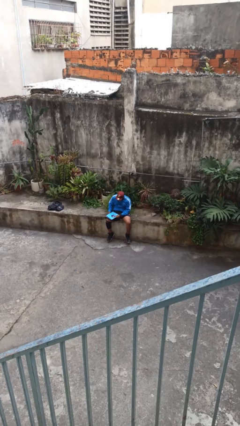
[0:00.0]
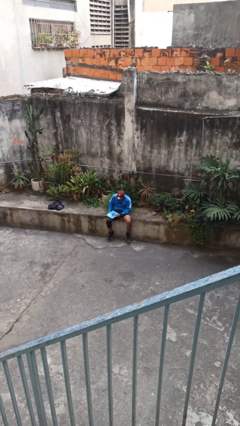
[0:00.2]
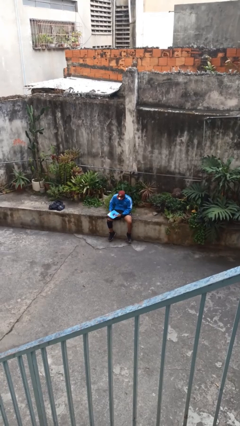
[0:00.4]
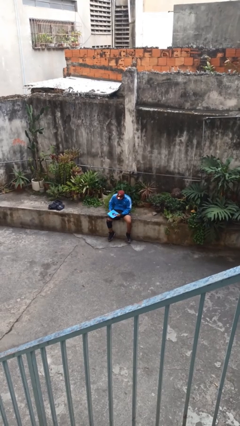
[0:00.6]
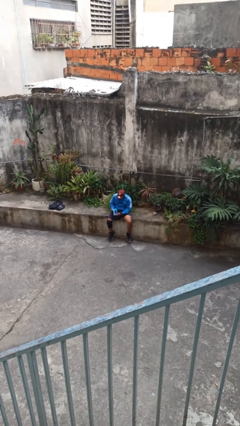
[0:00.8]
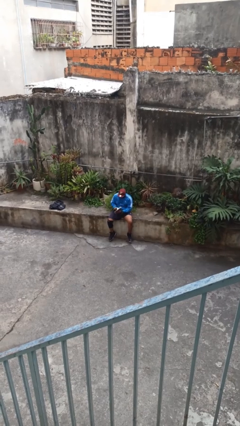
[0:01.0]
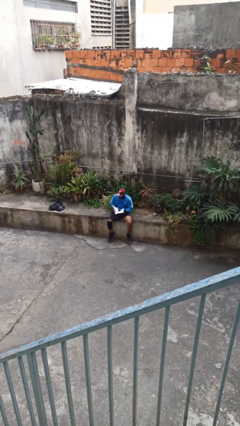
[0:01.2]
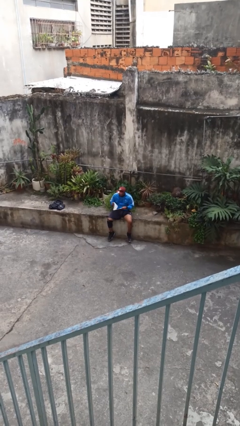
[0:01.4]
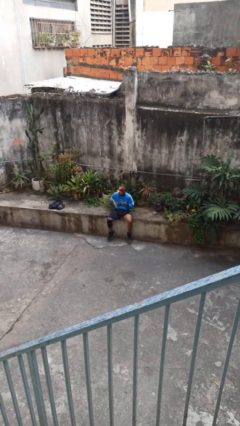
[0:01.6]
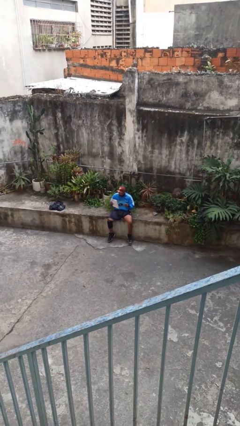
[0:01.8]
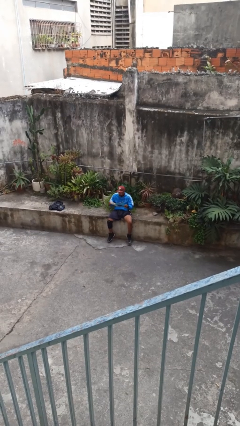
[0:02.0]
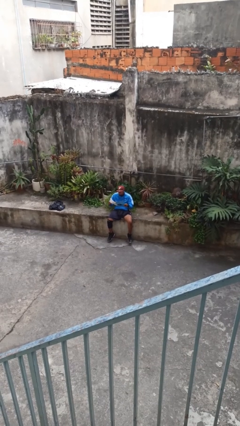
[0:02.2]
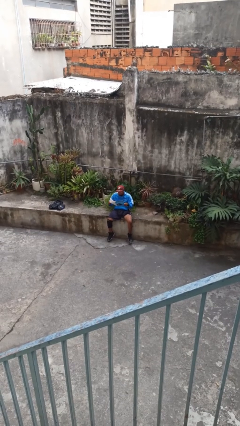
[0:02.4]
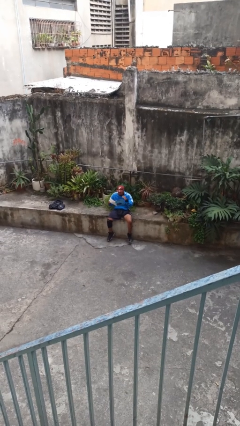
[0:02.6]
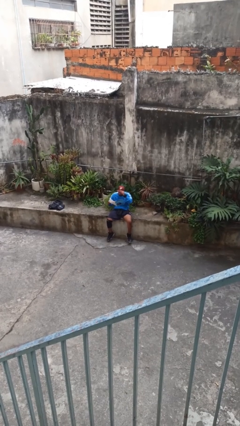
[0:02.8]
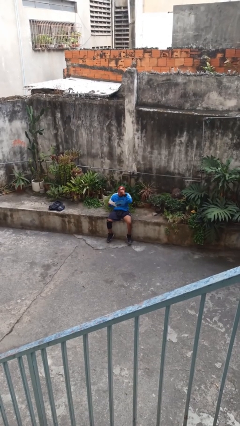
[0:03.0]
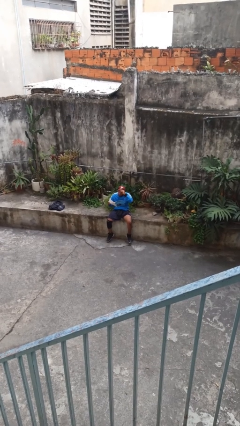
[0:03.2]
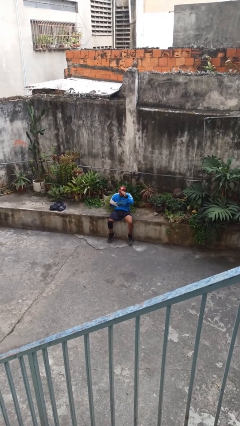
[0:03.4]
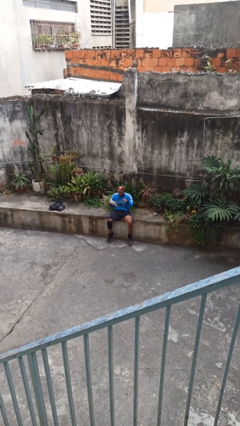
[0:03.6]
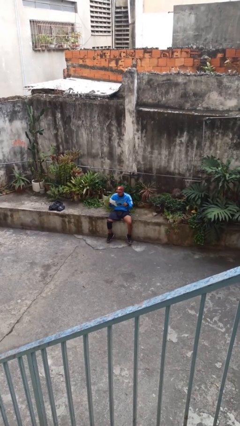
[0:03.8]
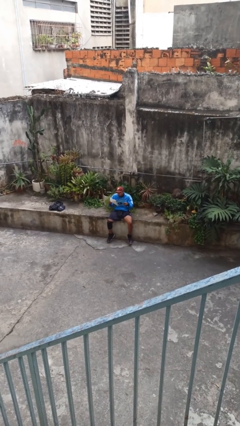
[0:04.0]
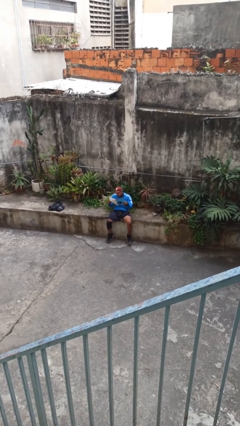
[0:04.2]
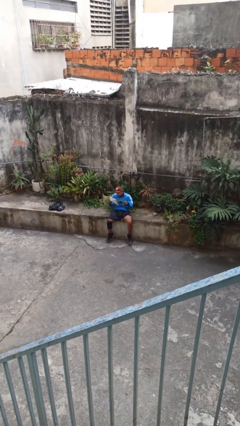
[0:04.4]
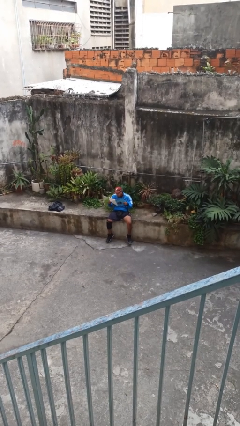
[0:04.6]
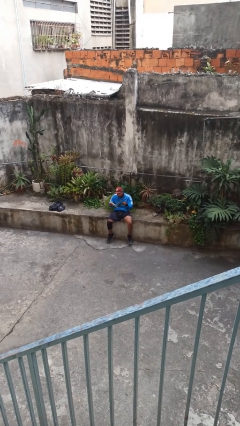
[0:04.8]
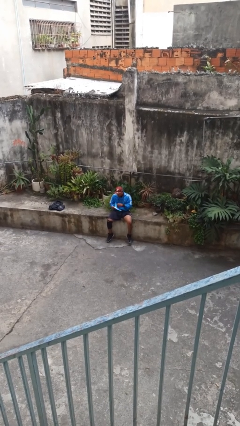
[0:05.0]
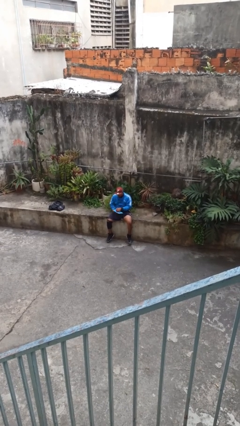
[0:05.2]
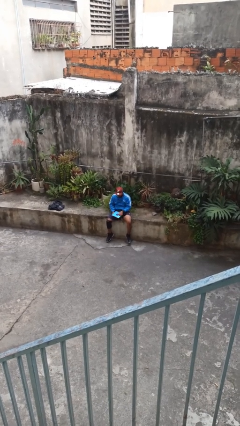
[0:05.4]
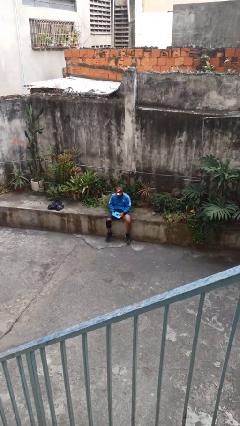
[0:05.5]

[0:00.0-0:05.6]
person reads document

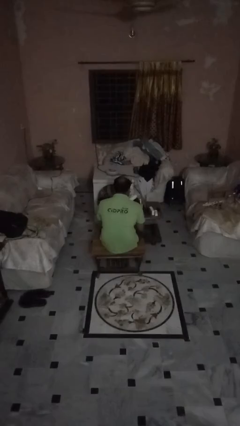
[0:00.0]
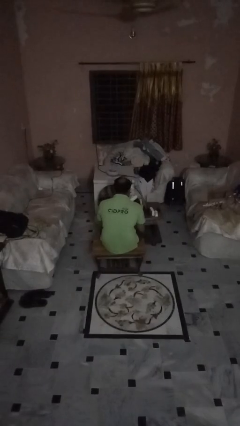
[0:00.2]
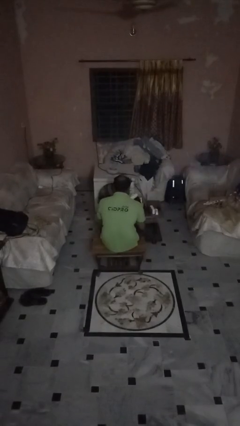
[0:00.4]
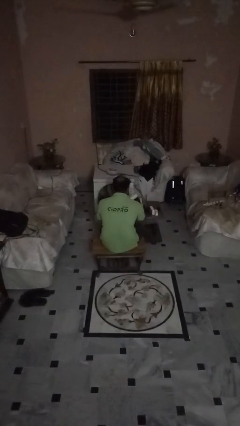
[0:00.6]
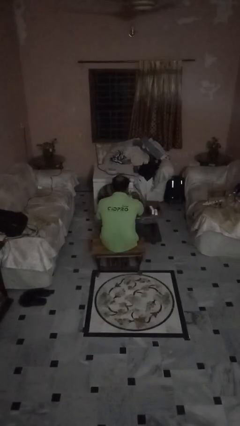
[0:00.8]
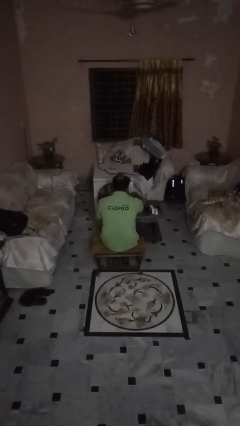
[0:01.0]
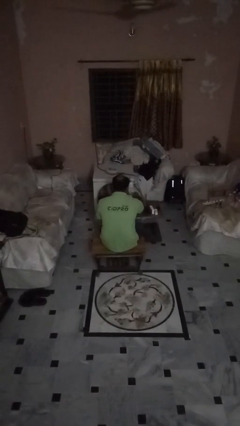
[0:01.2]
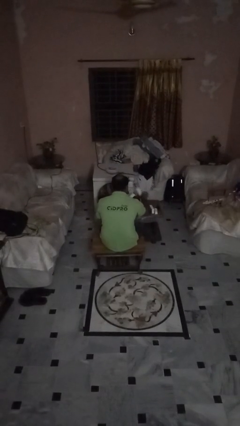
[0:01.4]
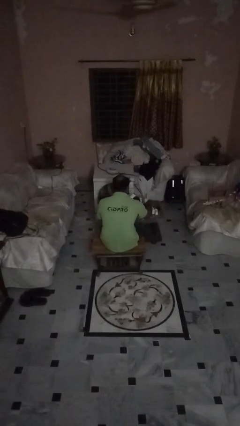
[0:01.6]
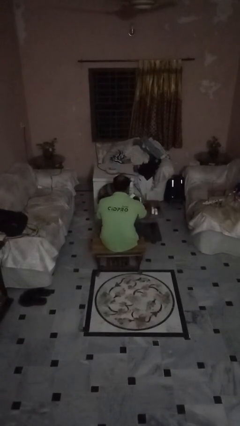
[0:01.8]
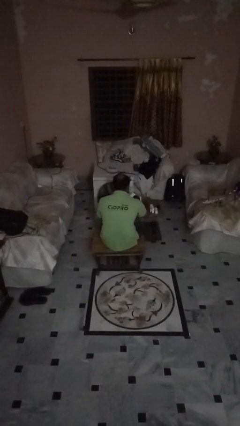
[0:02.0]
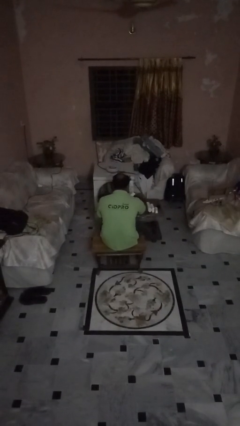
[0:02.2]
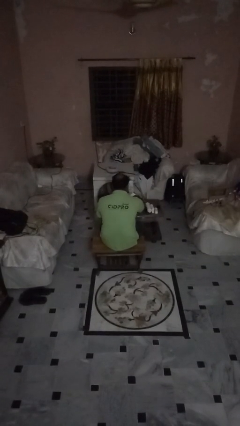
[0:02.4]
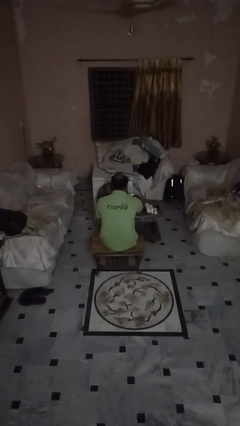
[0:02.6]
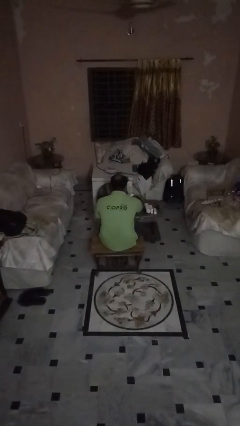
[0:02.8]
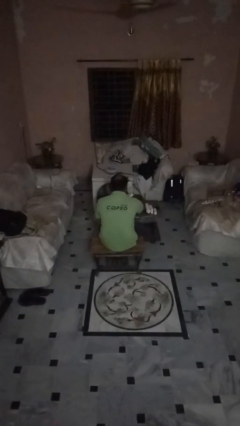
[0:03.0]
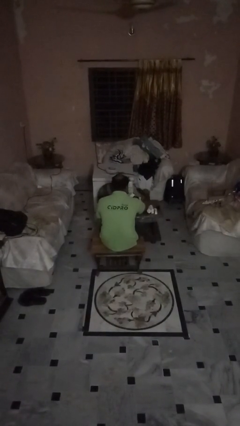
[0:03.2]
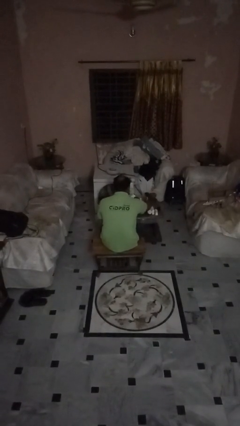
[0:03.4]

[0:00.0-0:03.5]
person unloads box onto table

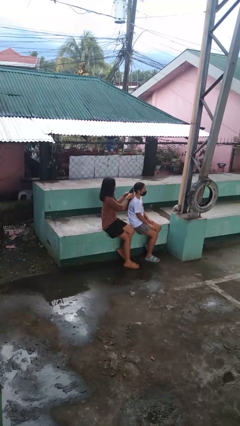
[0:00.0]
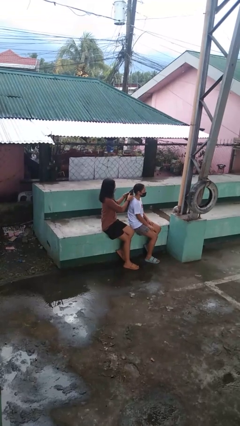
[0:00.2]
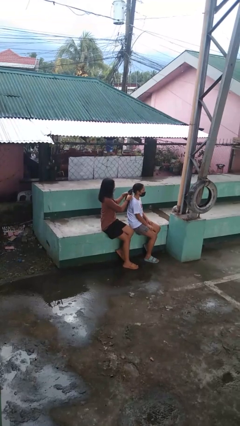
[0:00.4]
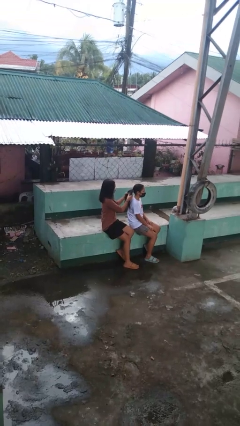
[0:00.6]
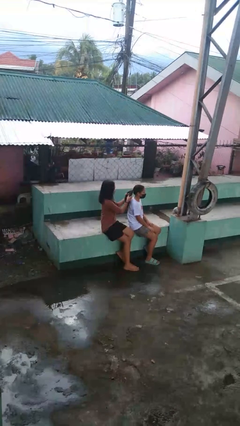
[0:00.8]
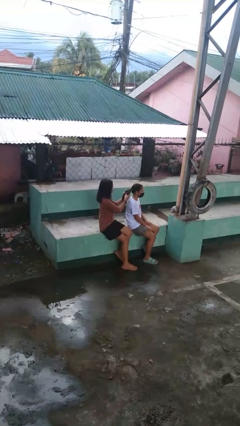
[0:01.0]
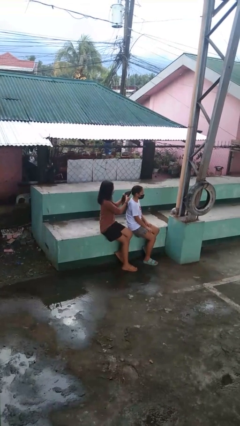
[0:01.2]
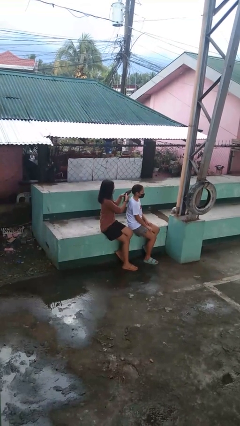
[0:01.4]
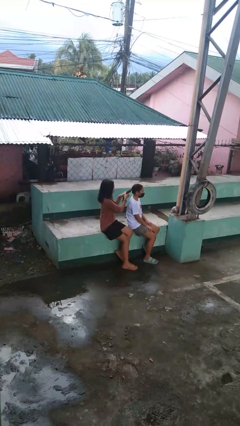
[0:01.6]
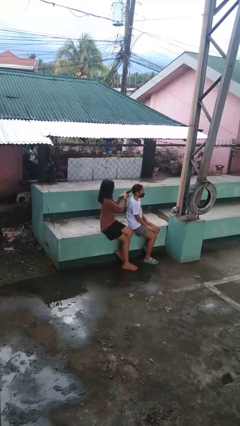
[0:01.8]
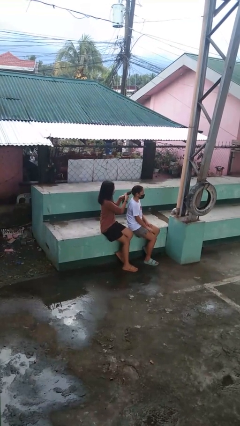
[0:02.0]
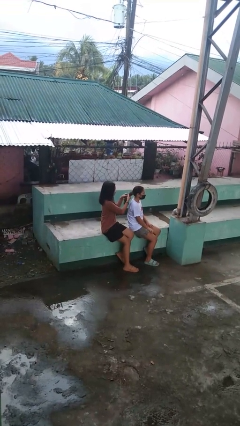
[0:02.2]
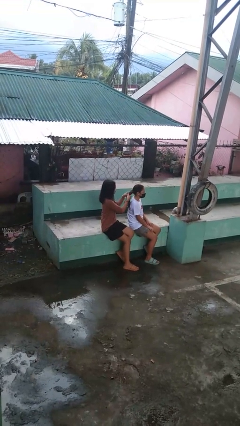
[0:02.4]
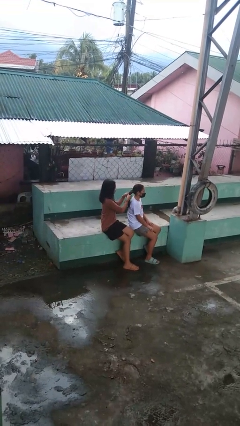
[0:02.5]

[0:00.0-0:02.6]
person braids hair of person

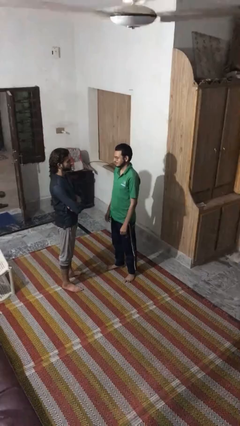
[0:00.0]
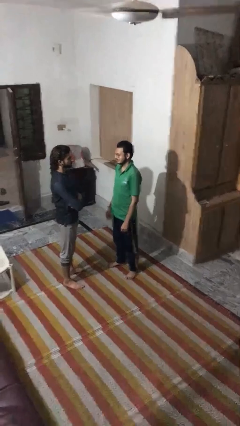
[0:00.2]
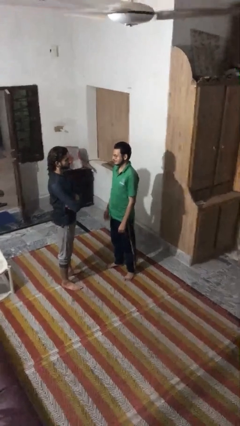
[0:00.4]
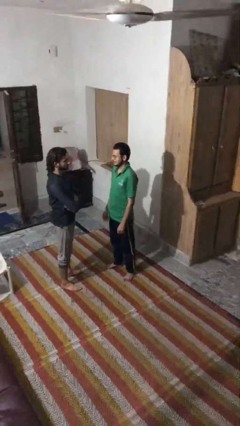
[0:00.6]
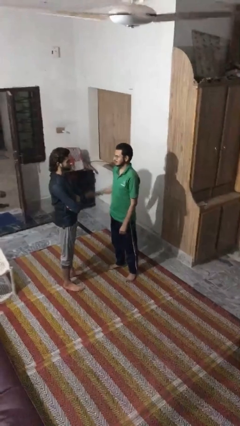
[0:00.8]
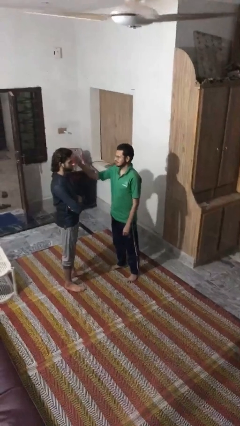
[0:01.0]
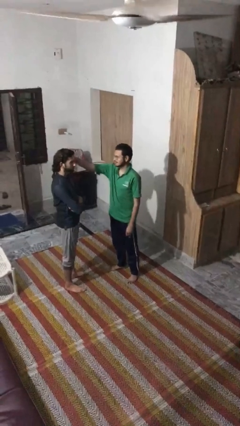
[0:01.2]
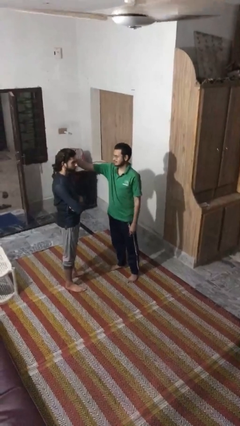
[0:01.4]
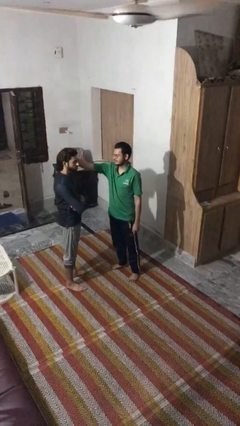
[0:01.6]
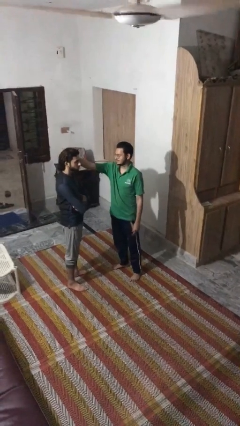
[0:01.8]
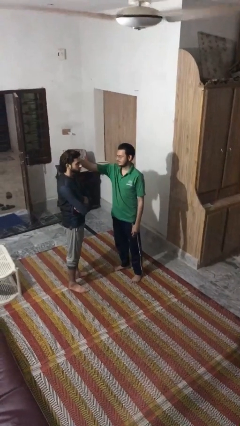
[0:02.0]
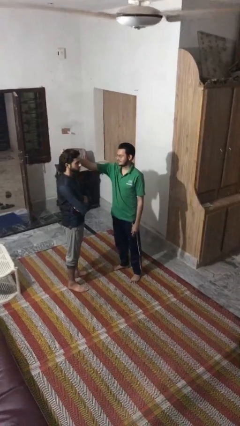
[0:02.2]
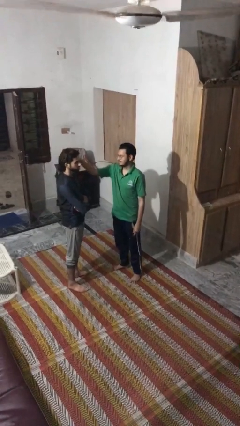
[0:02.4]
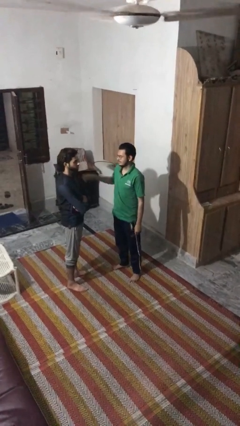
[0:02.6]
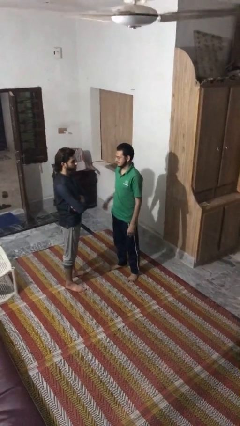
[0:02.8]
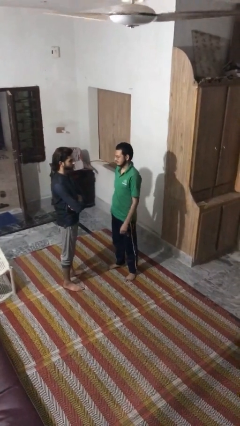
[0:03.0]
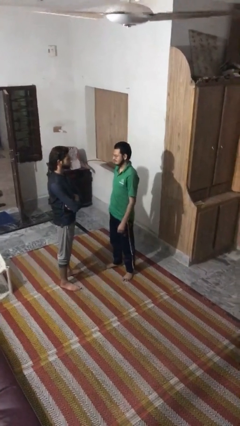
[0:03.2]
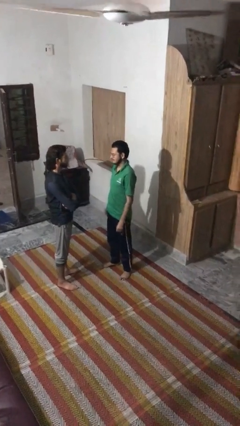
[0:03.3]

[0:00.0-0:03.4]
person grabs person by hair

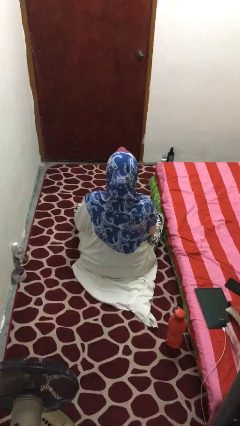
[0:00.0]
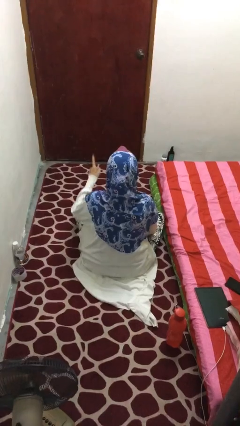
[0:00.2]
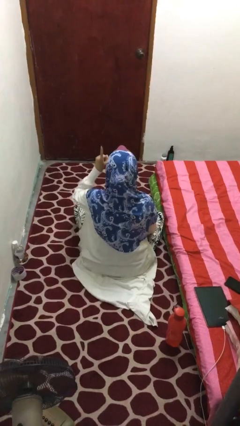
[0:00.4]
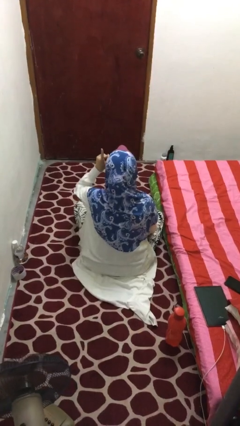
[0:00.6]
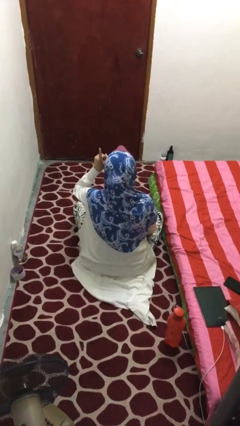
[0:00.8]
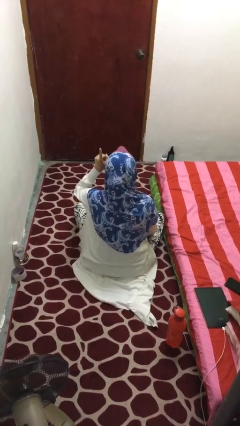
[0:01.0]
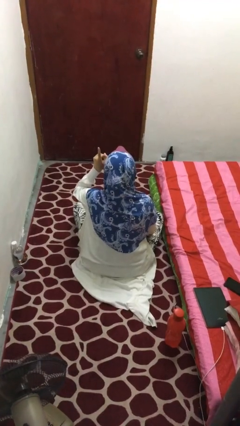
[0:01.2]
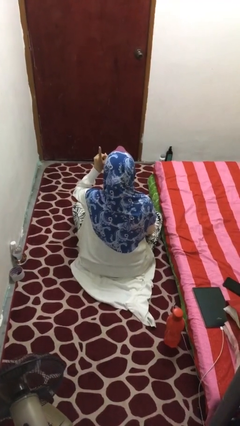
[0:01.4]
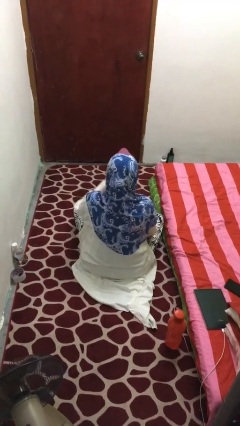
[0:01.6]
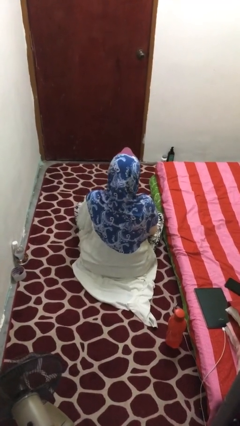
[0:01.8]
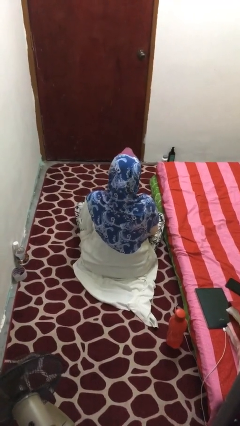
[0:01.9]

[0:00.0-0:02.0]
person gestures number one

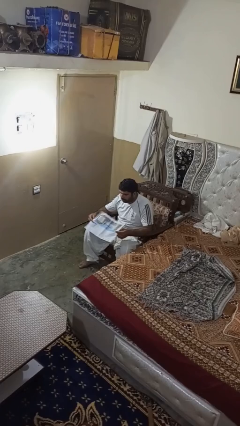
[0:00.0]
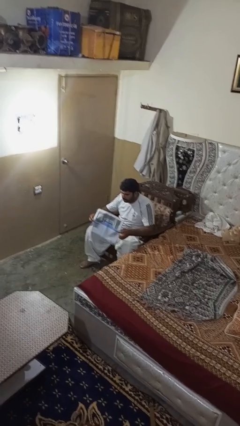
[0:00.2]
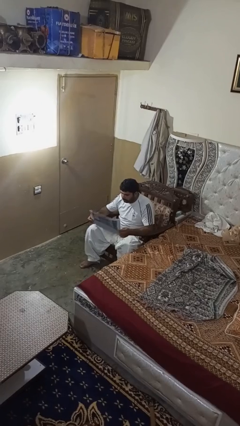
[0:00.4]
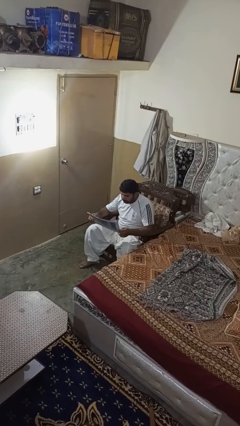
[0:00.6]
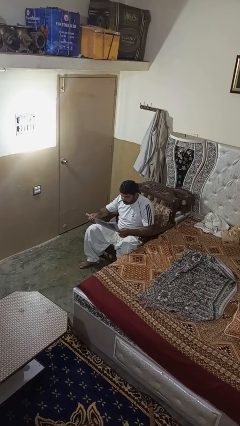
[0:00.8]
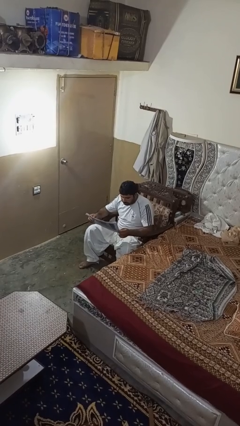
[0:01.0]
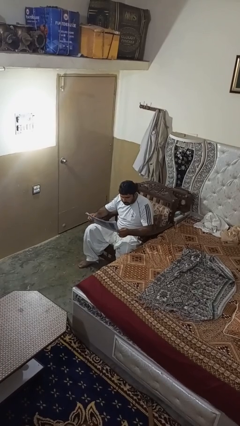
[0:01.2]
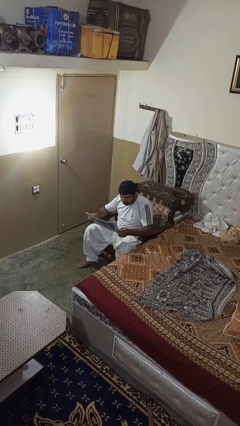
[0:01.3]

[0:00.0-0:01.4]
person reads newspaper
